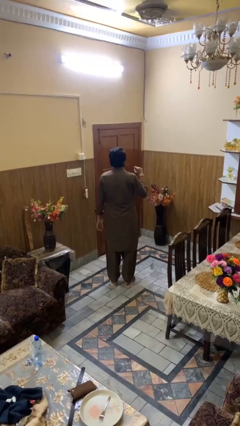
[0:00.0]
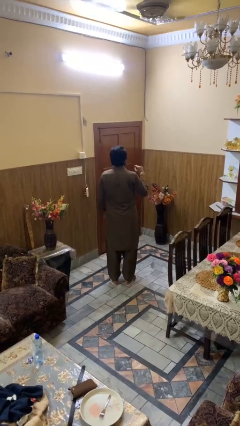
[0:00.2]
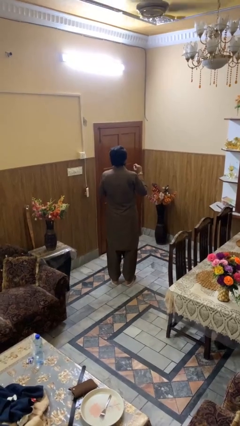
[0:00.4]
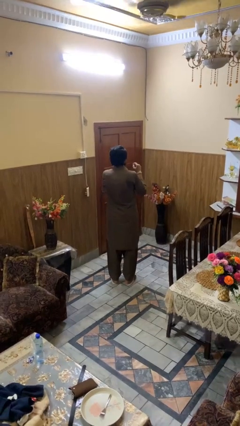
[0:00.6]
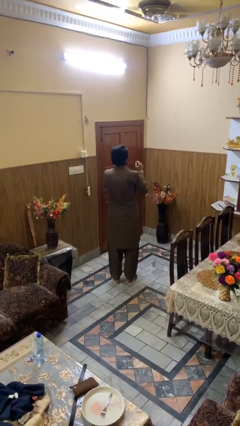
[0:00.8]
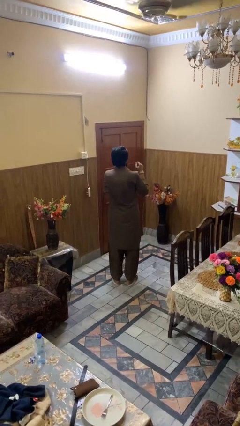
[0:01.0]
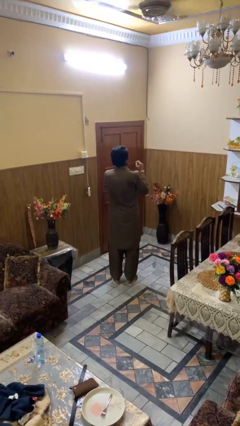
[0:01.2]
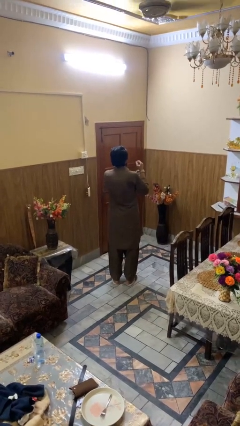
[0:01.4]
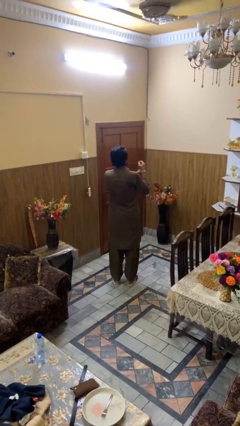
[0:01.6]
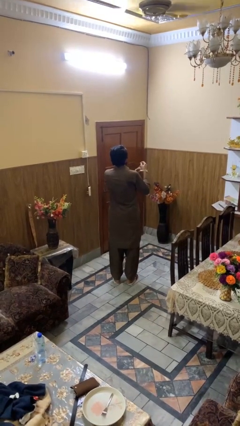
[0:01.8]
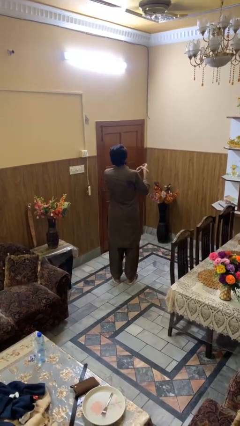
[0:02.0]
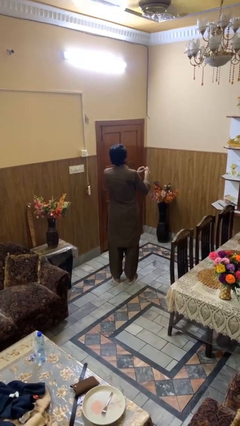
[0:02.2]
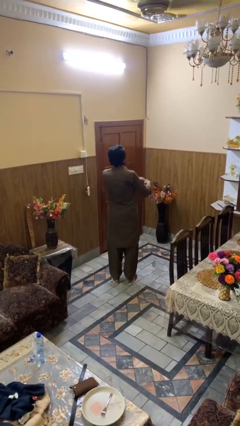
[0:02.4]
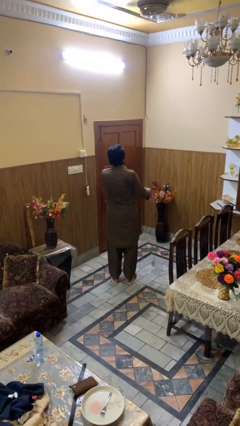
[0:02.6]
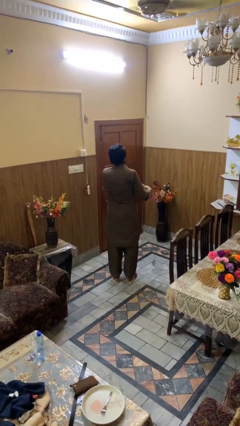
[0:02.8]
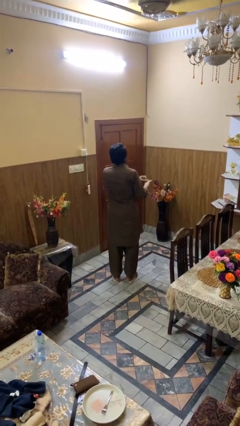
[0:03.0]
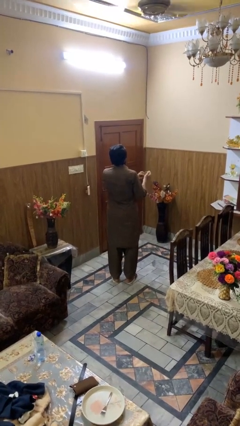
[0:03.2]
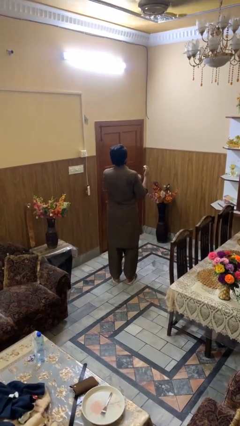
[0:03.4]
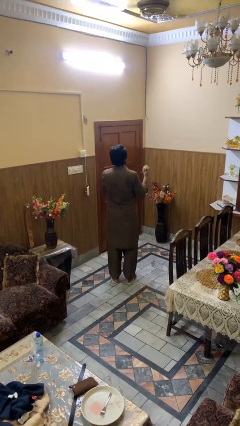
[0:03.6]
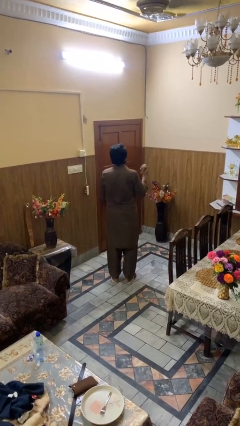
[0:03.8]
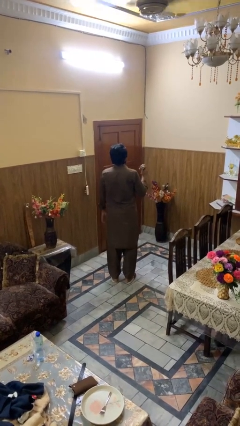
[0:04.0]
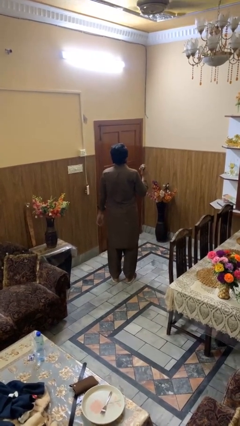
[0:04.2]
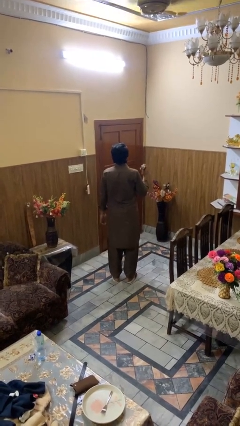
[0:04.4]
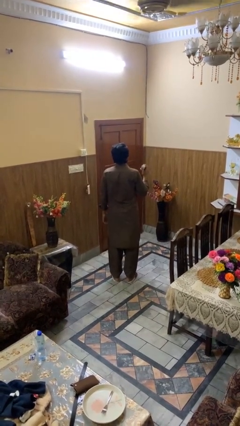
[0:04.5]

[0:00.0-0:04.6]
person takes off wristwatch

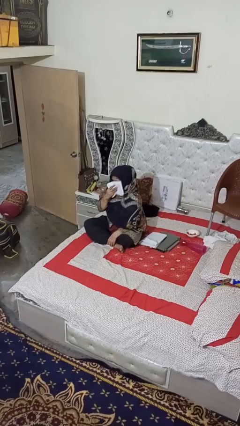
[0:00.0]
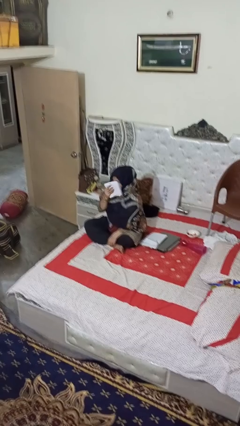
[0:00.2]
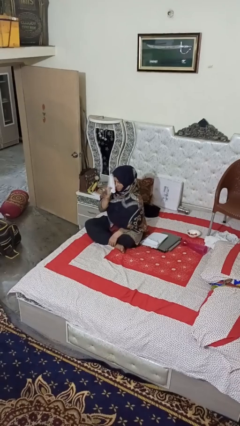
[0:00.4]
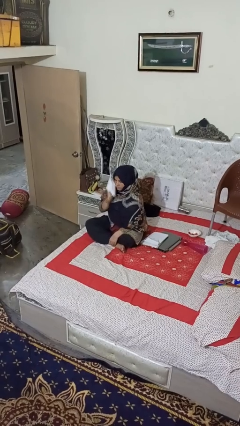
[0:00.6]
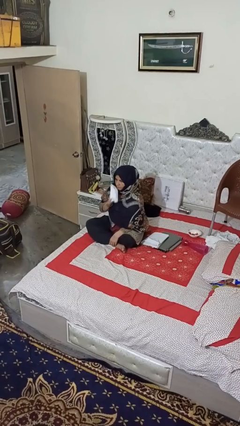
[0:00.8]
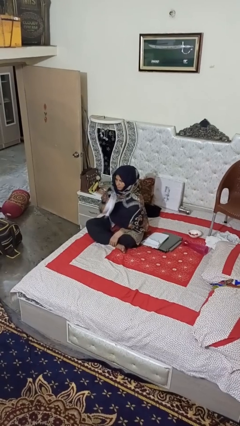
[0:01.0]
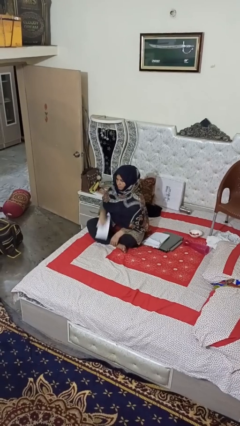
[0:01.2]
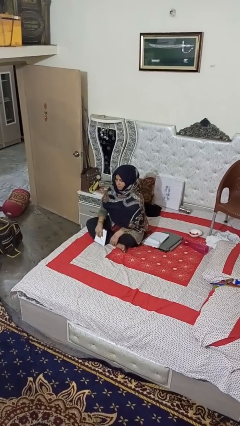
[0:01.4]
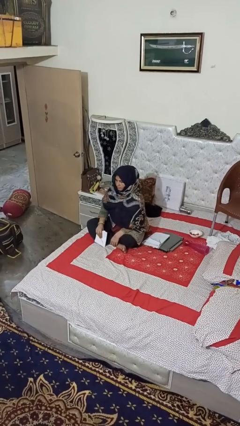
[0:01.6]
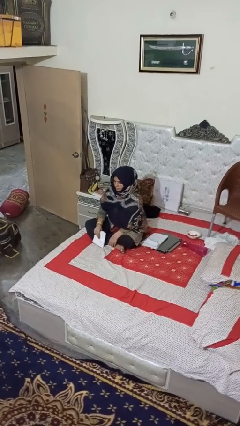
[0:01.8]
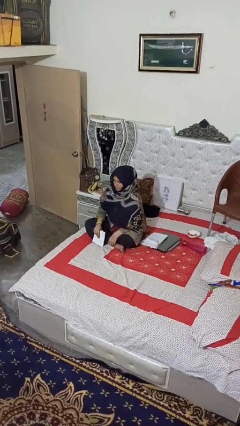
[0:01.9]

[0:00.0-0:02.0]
person wipes mouth with napkin

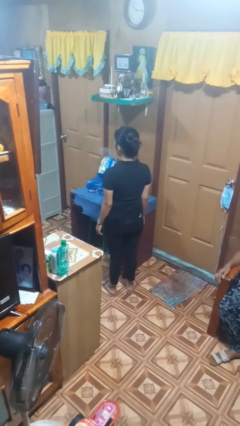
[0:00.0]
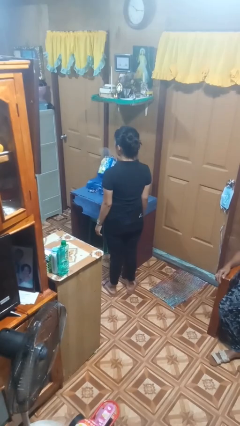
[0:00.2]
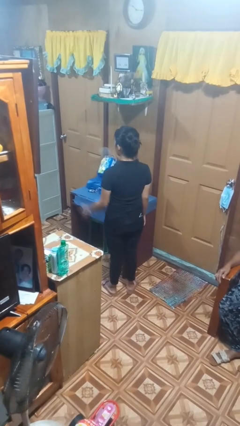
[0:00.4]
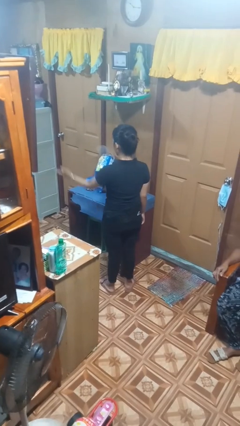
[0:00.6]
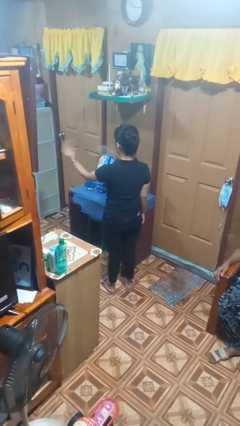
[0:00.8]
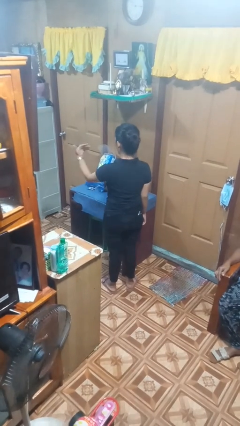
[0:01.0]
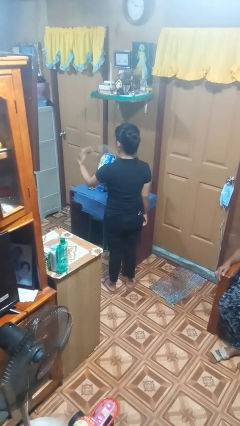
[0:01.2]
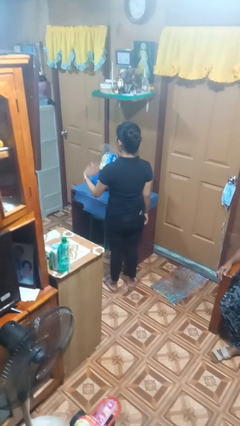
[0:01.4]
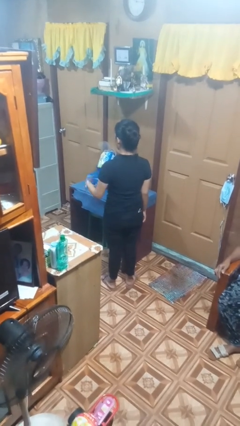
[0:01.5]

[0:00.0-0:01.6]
person gestures come here

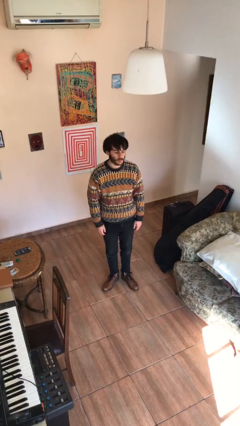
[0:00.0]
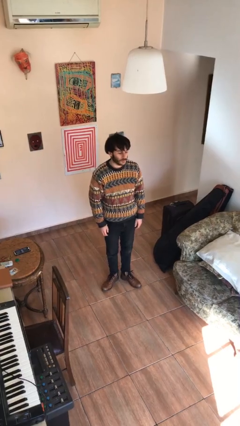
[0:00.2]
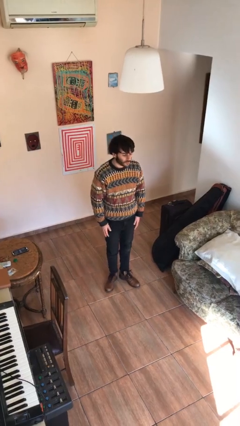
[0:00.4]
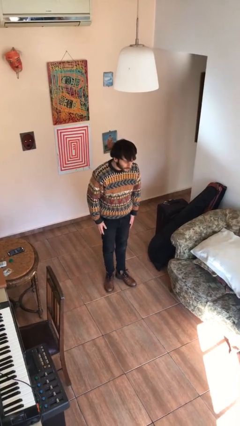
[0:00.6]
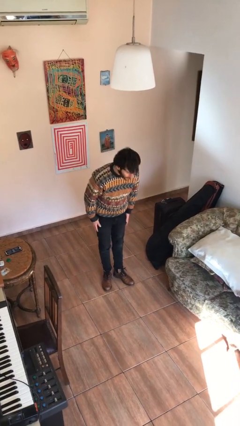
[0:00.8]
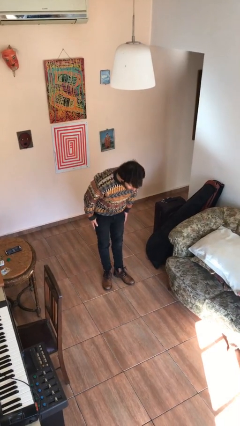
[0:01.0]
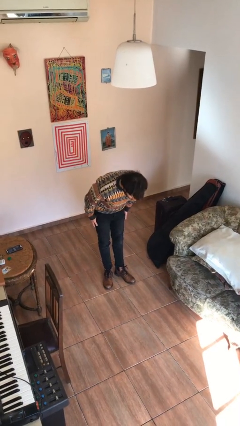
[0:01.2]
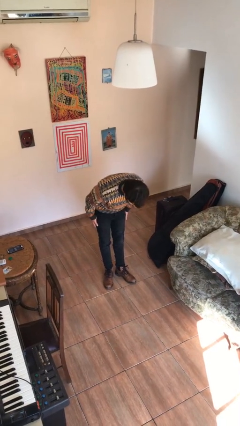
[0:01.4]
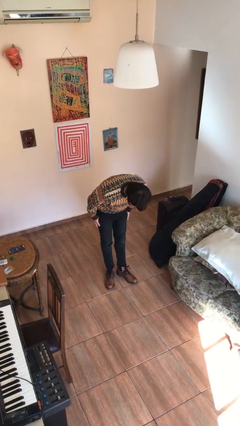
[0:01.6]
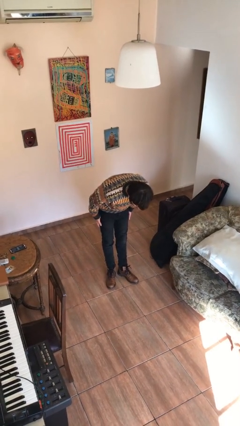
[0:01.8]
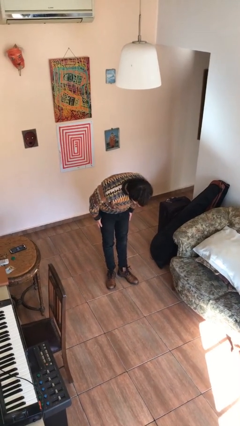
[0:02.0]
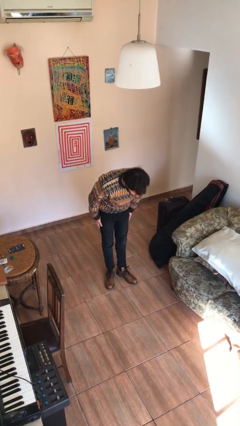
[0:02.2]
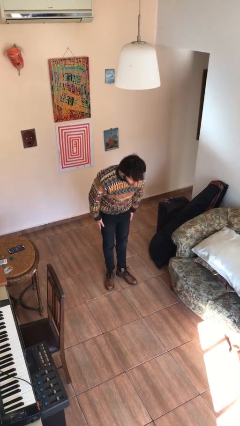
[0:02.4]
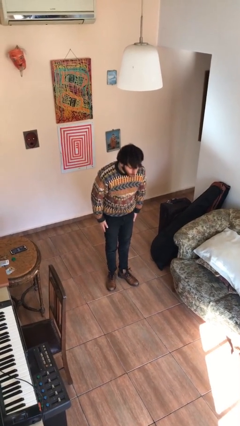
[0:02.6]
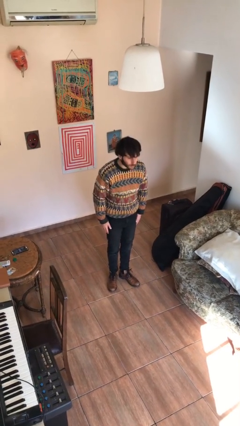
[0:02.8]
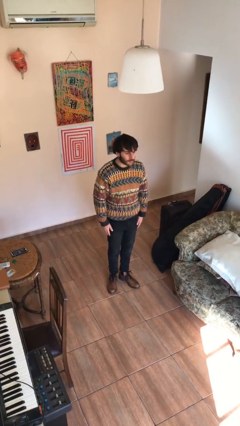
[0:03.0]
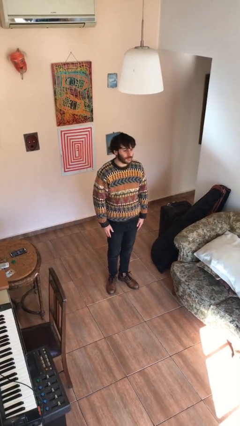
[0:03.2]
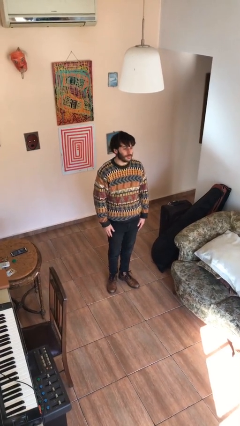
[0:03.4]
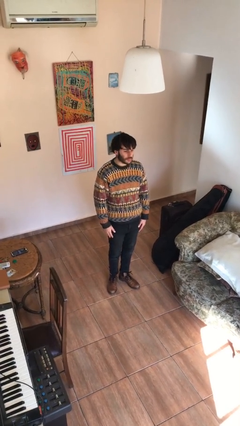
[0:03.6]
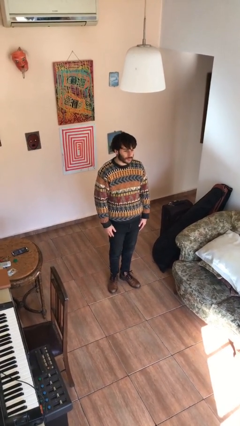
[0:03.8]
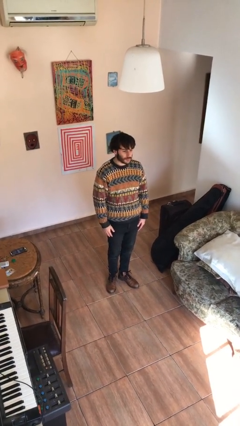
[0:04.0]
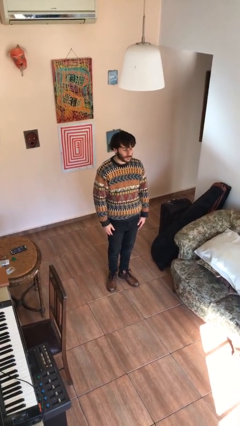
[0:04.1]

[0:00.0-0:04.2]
person bows

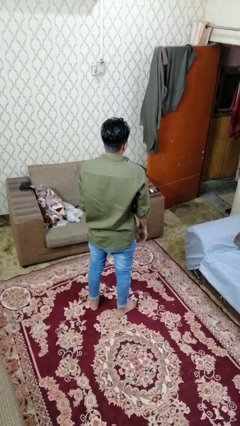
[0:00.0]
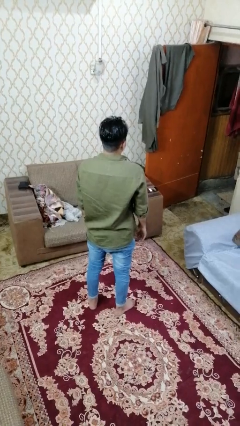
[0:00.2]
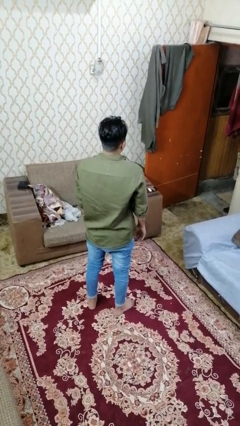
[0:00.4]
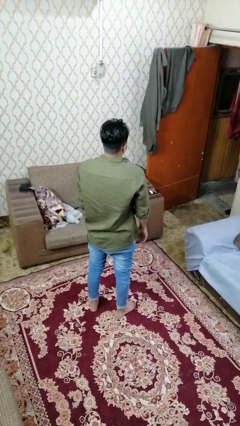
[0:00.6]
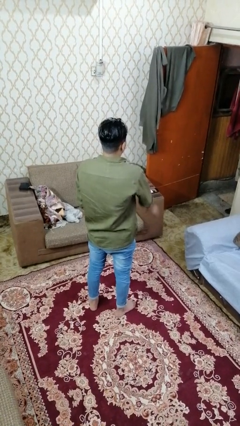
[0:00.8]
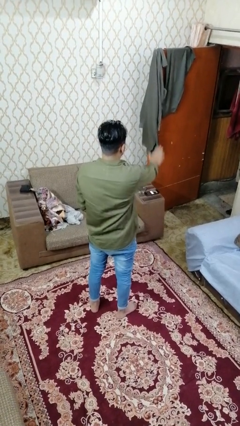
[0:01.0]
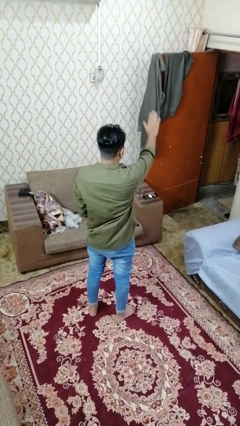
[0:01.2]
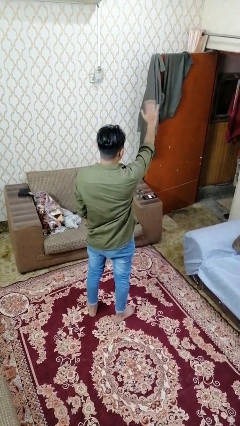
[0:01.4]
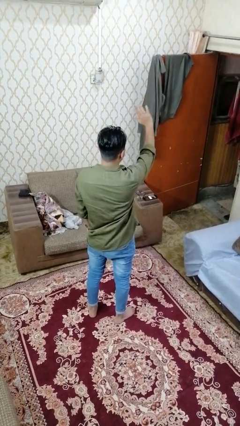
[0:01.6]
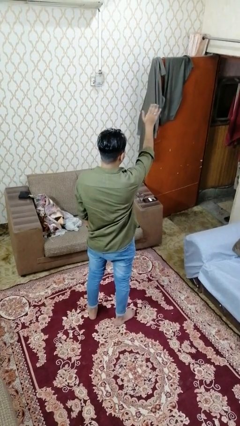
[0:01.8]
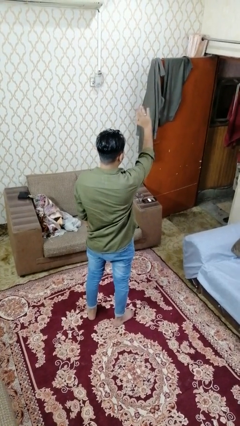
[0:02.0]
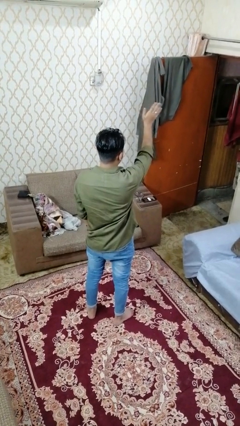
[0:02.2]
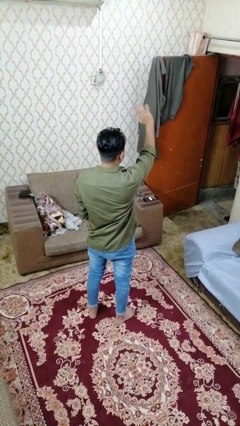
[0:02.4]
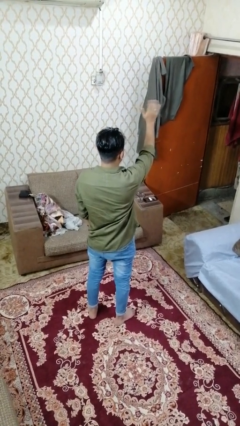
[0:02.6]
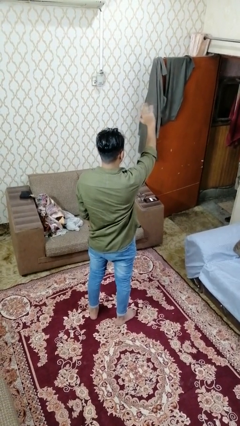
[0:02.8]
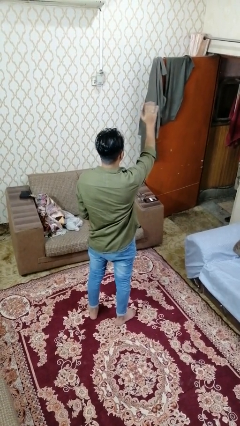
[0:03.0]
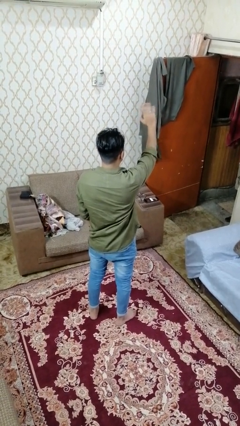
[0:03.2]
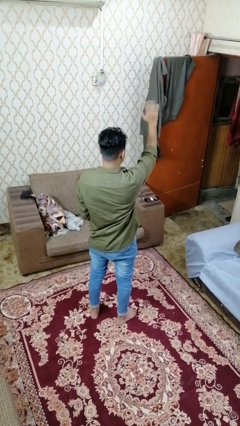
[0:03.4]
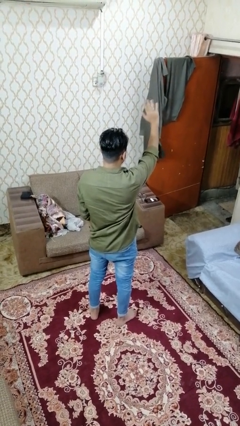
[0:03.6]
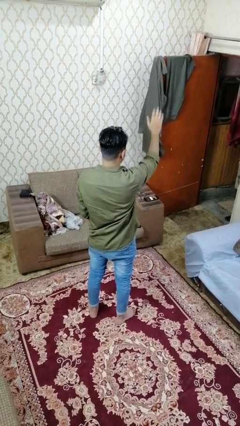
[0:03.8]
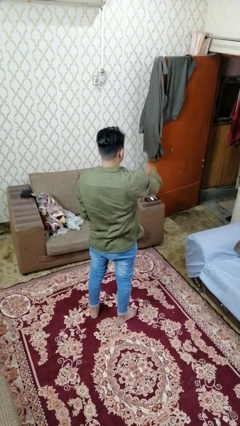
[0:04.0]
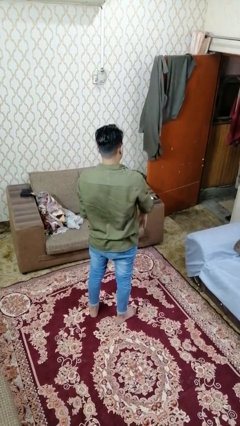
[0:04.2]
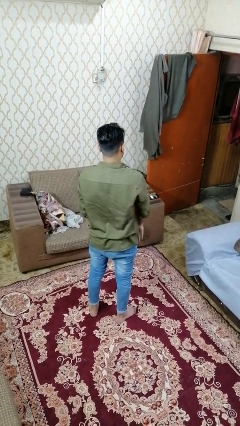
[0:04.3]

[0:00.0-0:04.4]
person carries furniture

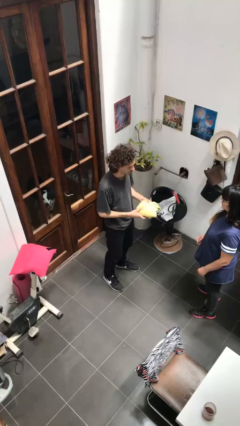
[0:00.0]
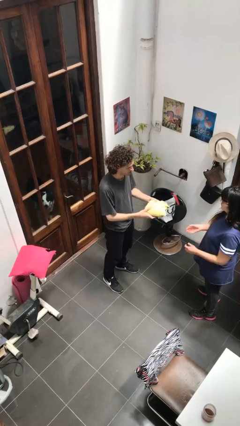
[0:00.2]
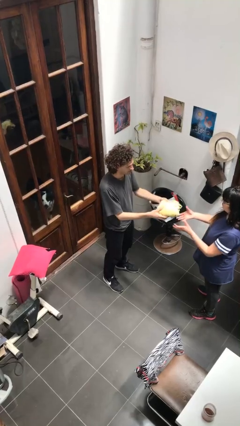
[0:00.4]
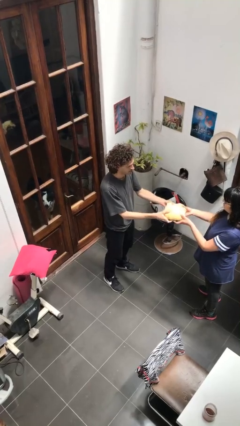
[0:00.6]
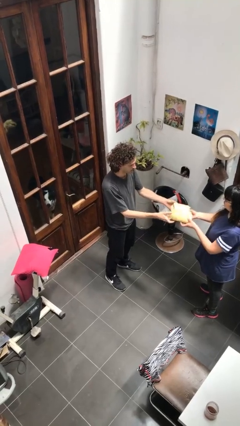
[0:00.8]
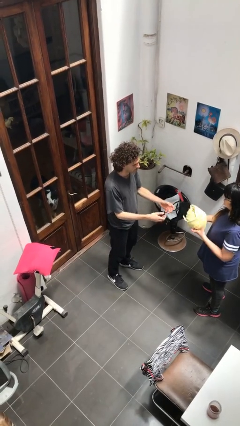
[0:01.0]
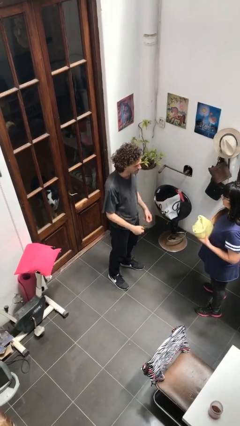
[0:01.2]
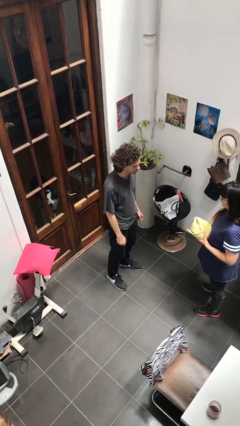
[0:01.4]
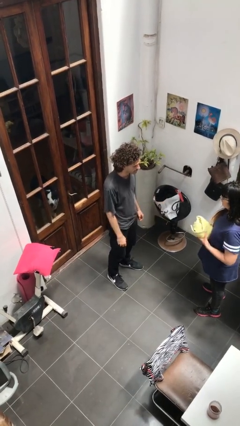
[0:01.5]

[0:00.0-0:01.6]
person transfers object to person
